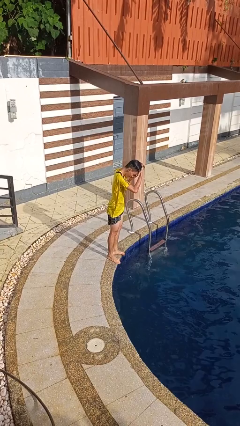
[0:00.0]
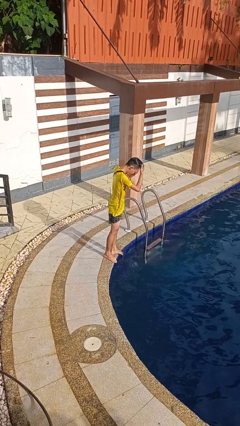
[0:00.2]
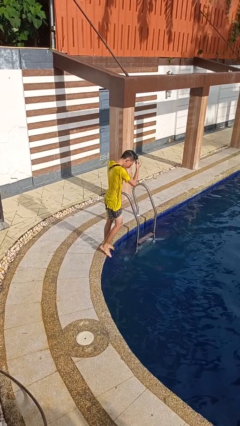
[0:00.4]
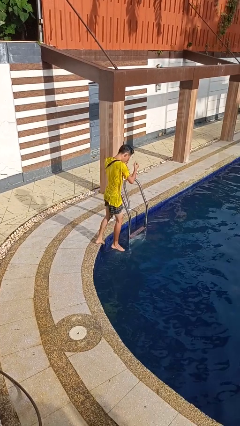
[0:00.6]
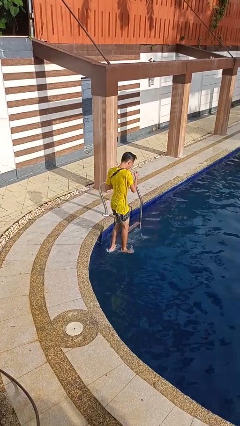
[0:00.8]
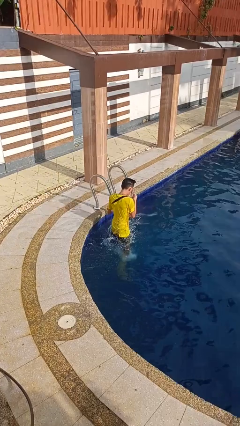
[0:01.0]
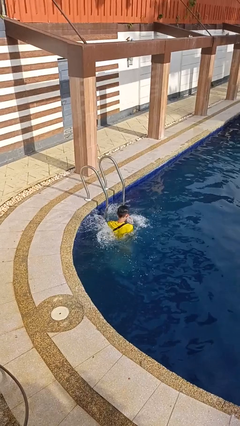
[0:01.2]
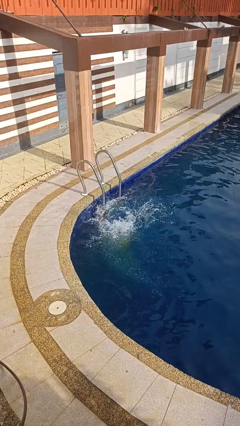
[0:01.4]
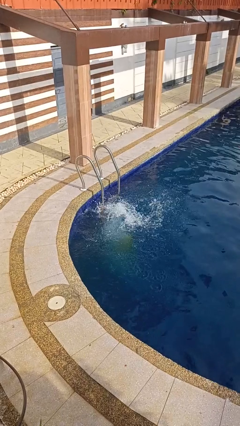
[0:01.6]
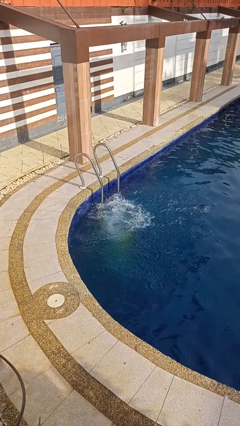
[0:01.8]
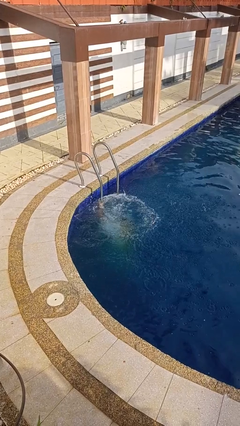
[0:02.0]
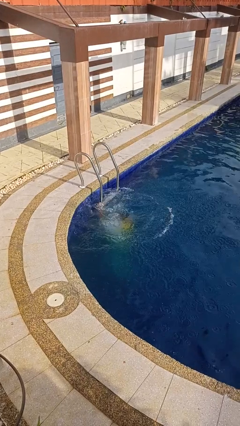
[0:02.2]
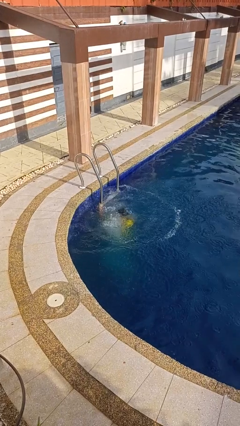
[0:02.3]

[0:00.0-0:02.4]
person falls into pool

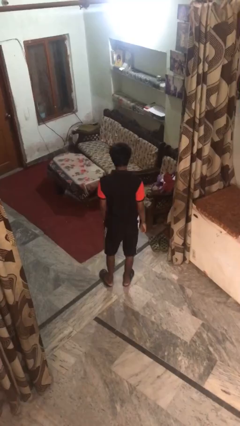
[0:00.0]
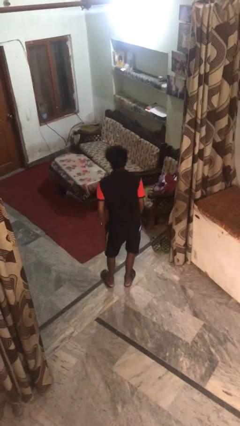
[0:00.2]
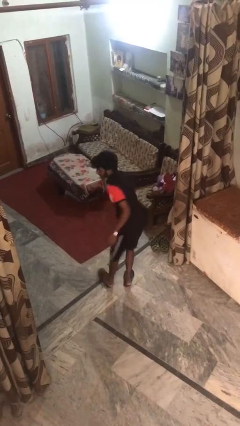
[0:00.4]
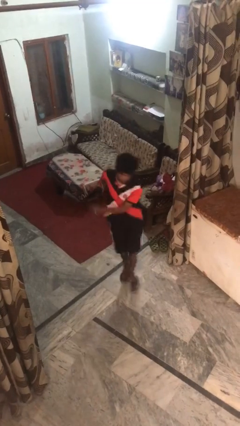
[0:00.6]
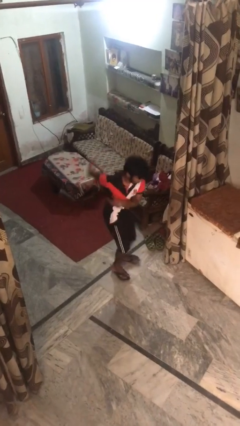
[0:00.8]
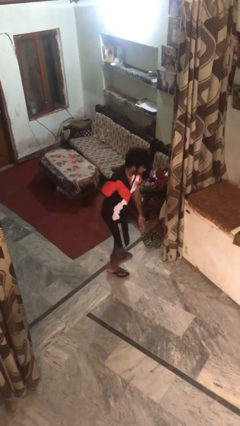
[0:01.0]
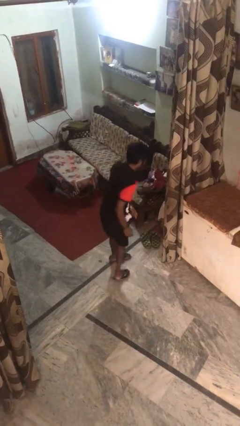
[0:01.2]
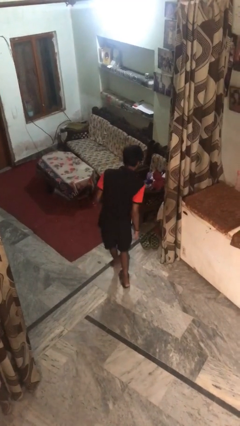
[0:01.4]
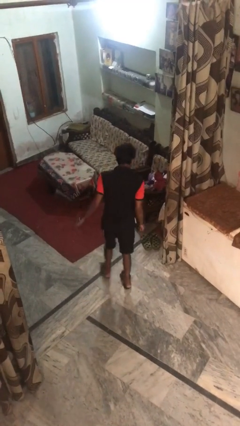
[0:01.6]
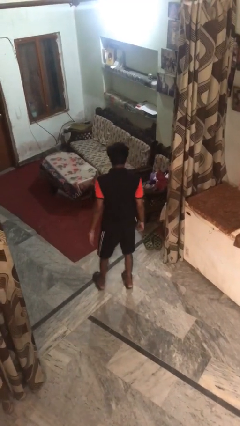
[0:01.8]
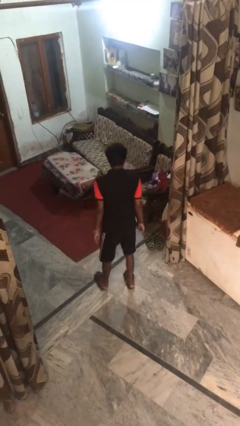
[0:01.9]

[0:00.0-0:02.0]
person twirls

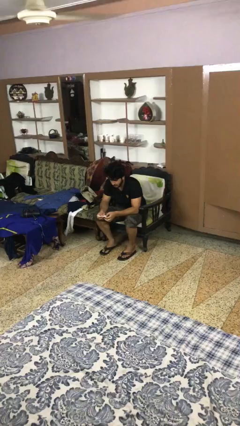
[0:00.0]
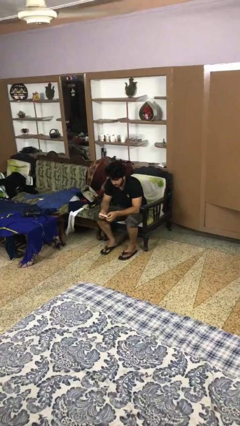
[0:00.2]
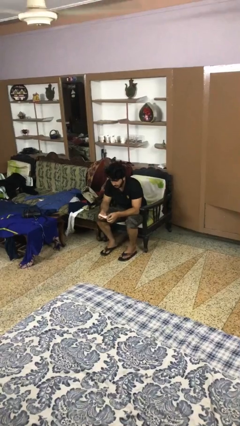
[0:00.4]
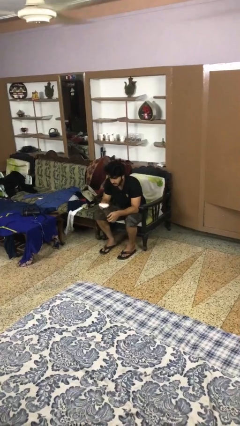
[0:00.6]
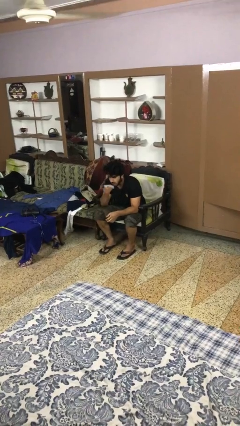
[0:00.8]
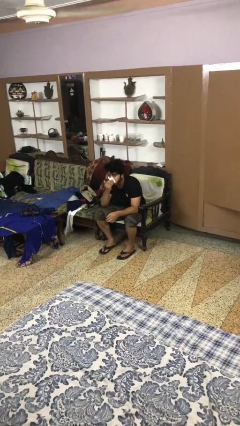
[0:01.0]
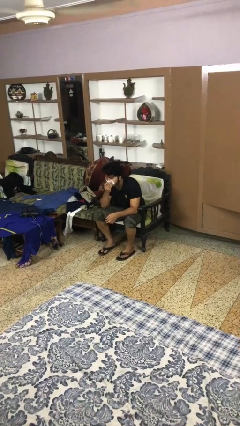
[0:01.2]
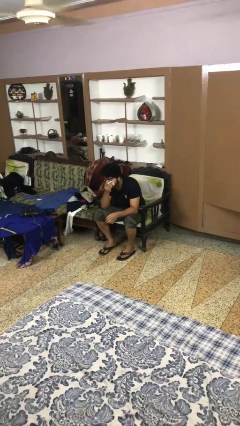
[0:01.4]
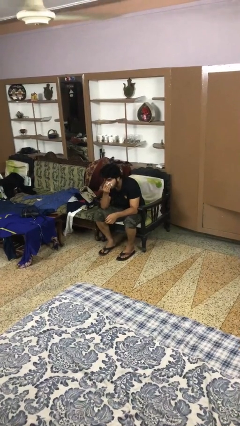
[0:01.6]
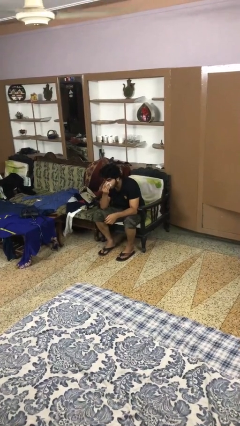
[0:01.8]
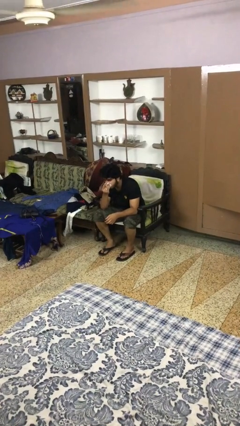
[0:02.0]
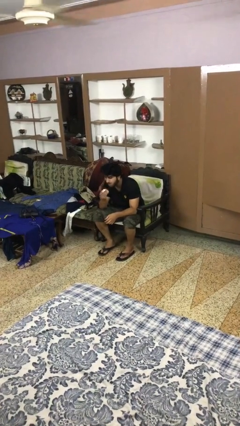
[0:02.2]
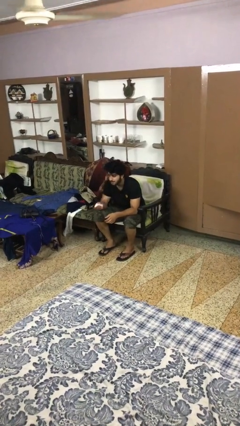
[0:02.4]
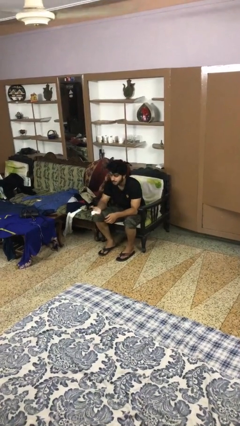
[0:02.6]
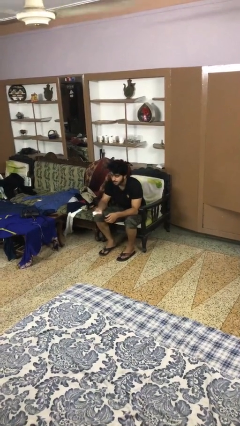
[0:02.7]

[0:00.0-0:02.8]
person blows nose

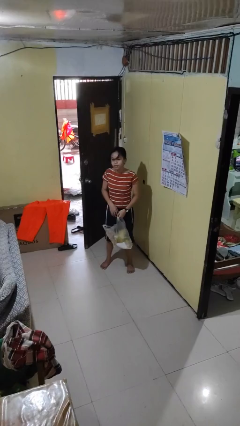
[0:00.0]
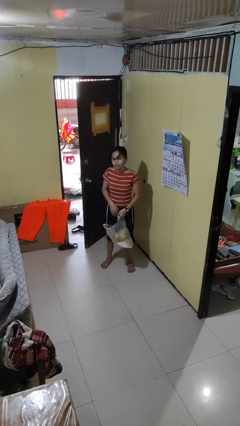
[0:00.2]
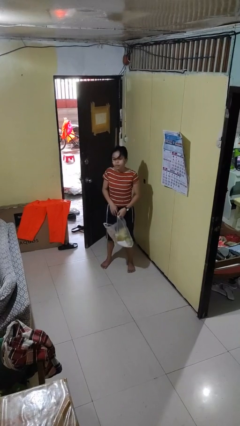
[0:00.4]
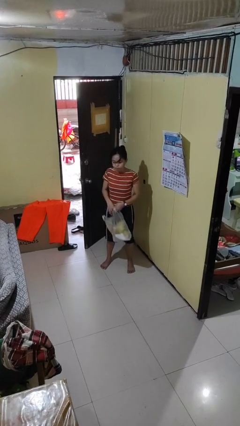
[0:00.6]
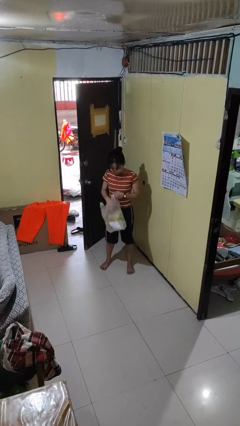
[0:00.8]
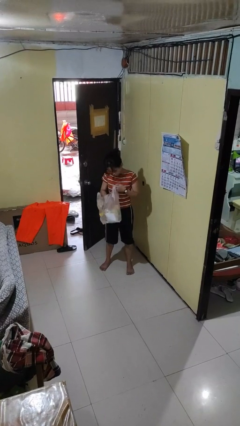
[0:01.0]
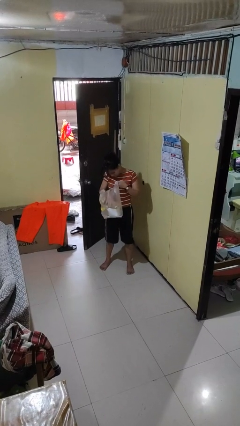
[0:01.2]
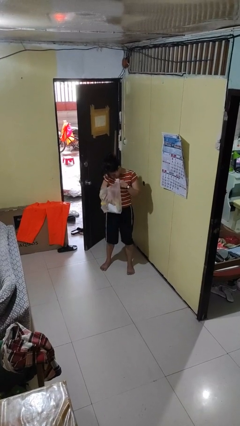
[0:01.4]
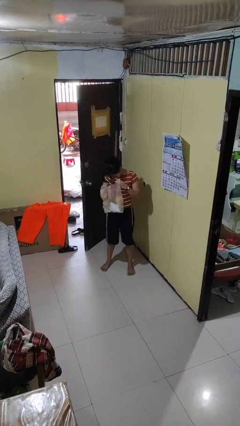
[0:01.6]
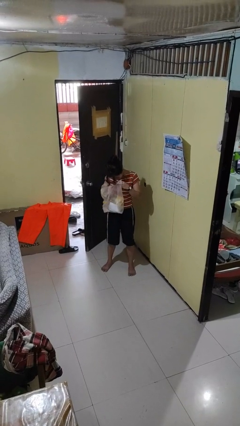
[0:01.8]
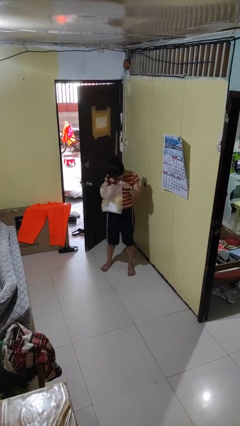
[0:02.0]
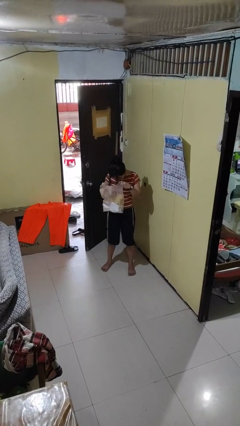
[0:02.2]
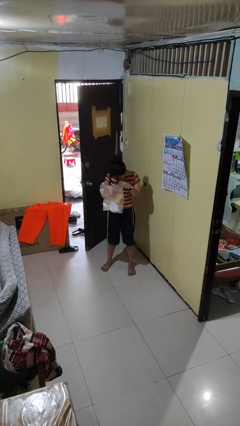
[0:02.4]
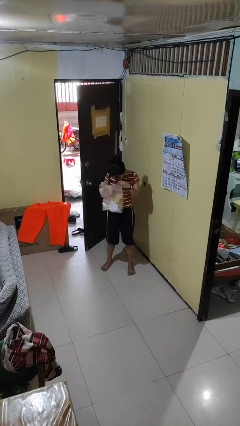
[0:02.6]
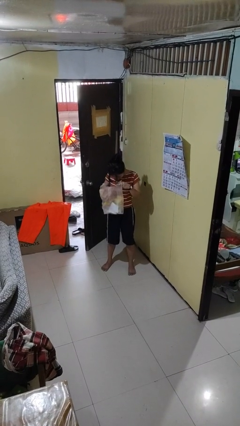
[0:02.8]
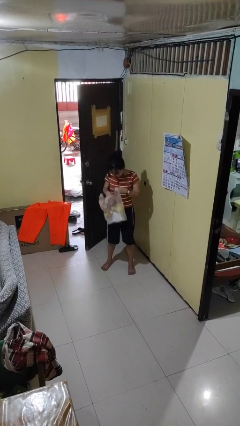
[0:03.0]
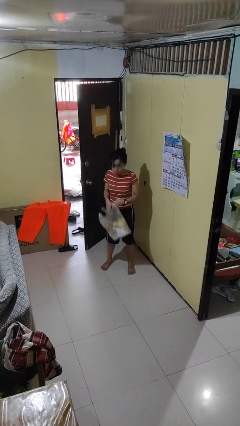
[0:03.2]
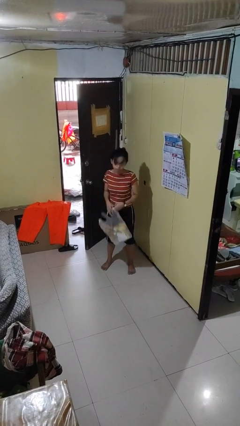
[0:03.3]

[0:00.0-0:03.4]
person searches in bag

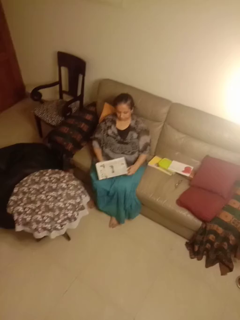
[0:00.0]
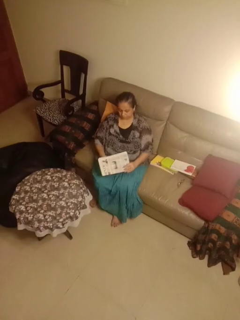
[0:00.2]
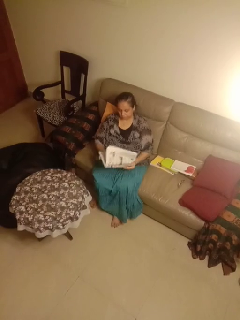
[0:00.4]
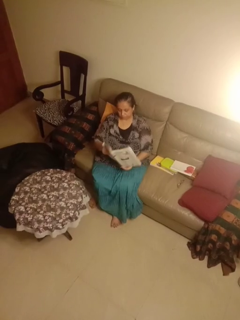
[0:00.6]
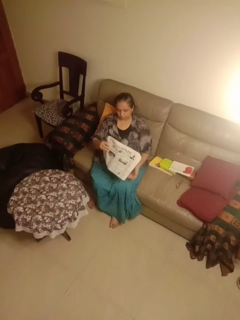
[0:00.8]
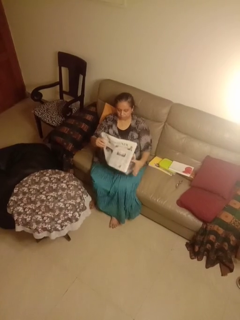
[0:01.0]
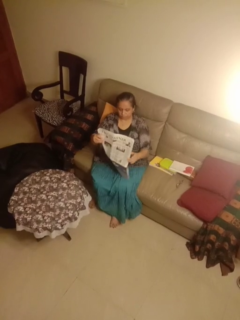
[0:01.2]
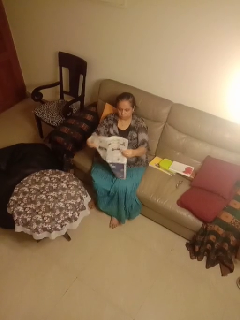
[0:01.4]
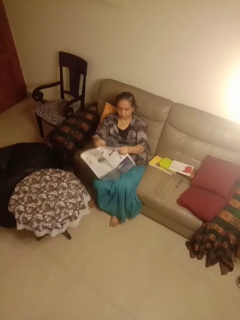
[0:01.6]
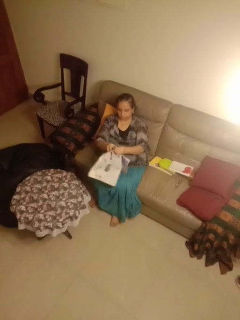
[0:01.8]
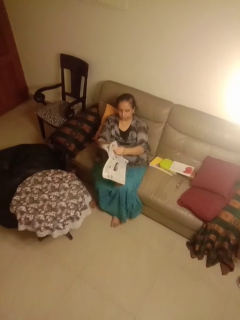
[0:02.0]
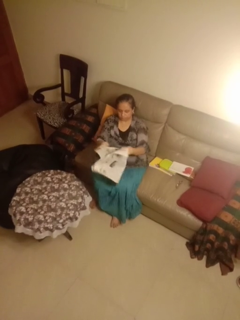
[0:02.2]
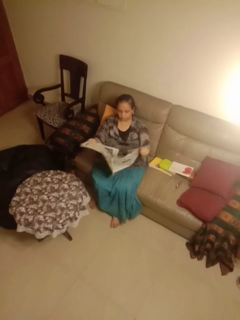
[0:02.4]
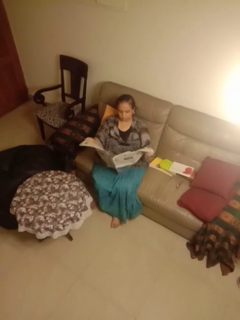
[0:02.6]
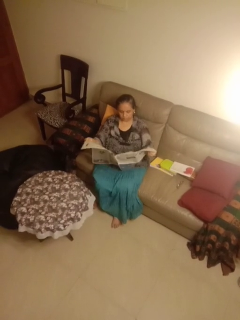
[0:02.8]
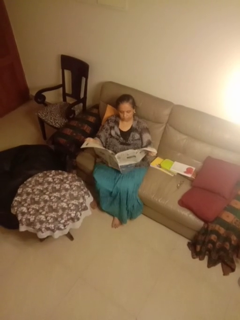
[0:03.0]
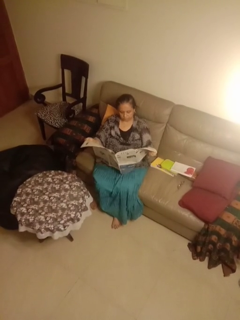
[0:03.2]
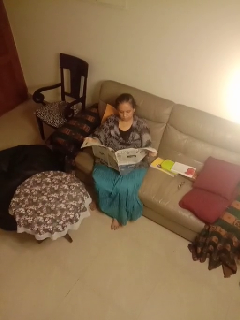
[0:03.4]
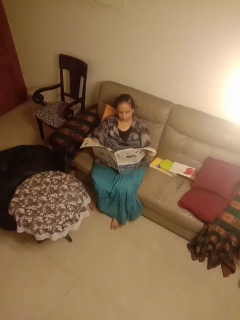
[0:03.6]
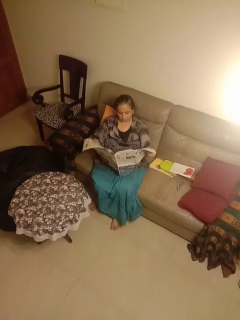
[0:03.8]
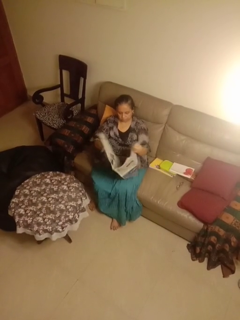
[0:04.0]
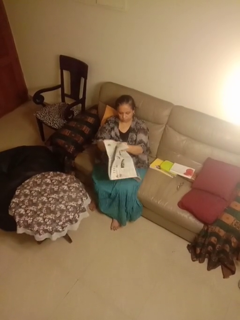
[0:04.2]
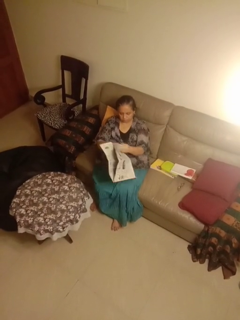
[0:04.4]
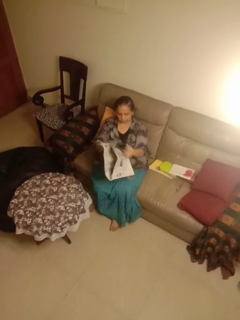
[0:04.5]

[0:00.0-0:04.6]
person reads newspaper

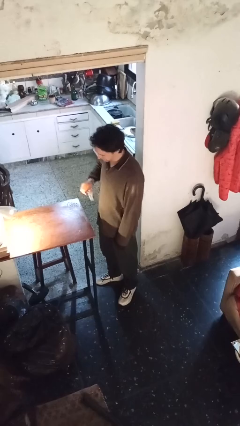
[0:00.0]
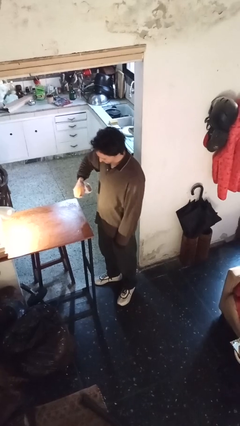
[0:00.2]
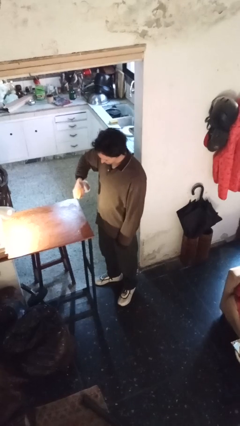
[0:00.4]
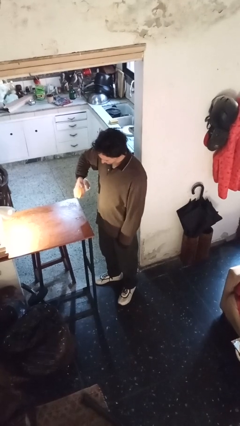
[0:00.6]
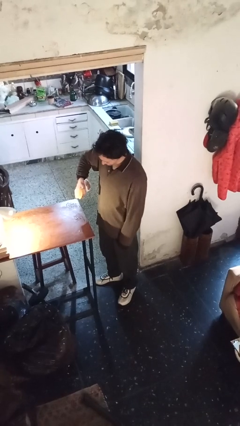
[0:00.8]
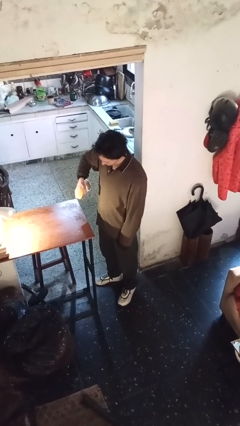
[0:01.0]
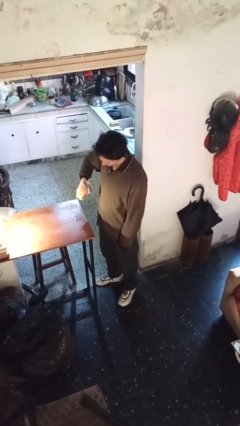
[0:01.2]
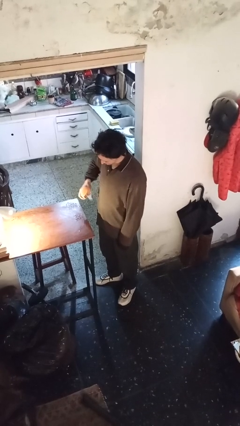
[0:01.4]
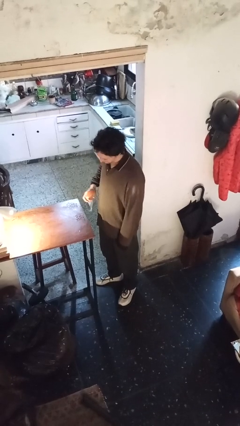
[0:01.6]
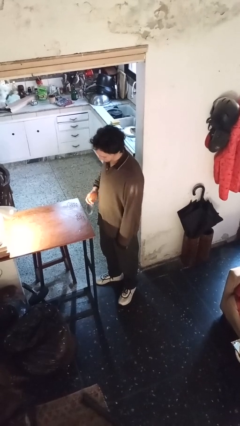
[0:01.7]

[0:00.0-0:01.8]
person sprays from bottle

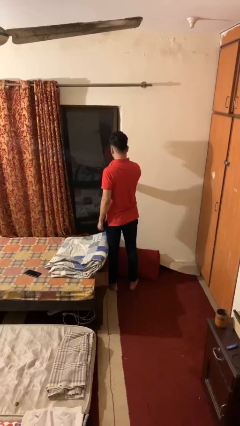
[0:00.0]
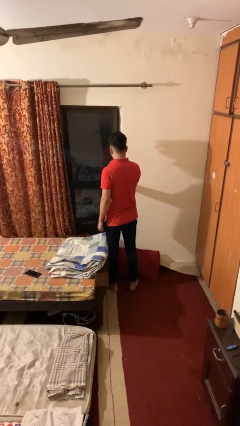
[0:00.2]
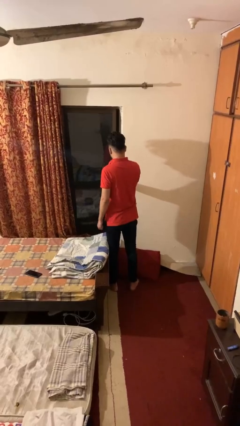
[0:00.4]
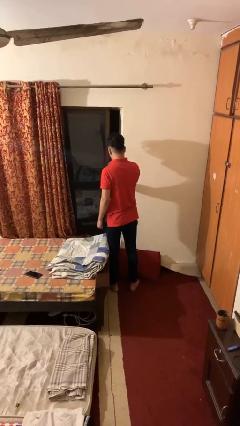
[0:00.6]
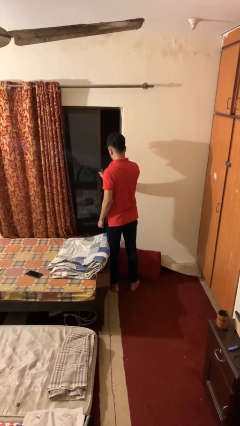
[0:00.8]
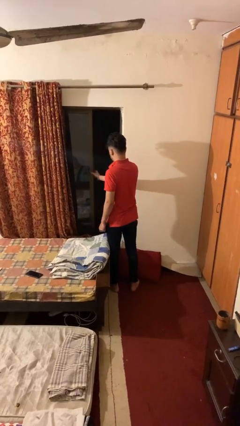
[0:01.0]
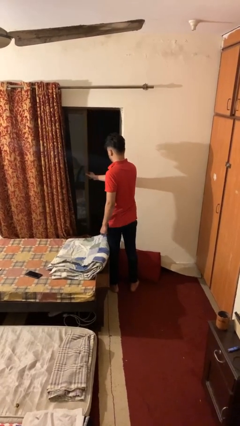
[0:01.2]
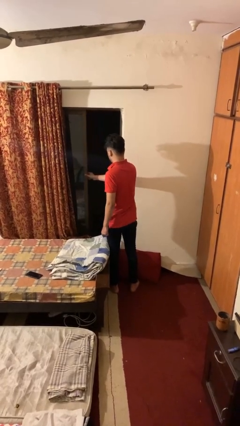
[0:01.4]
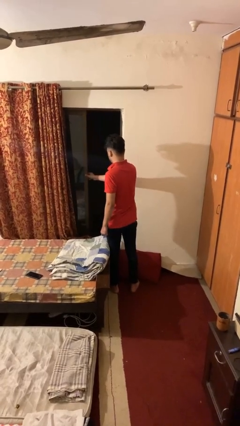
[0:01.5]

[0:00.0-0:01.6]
person opens home window
